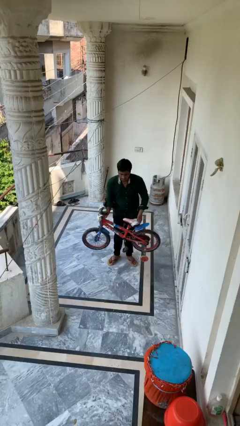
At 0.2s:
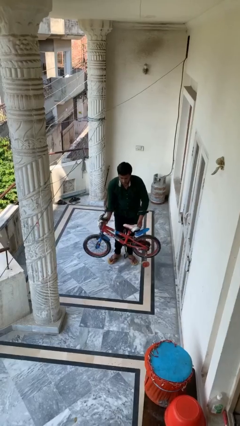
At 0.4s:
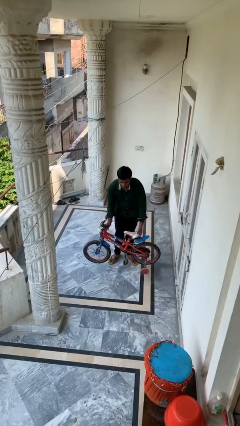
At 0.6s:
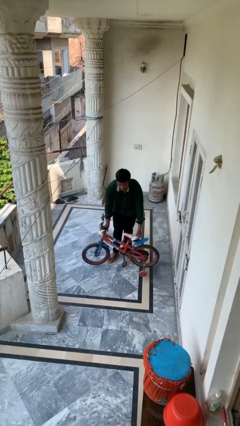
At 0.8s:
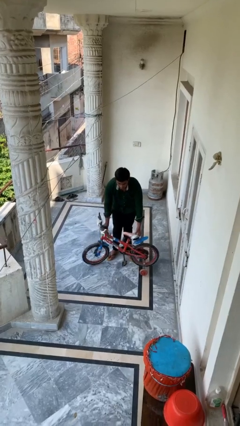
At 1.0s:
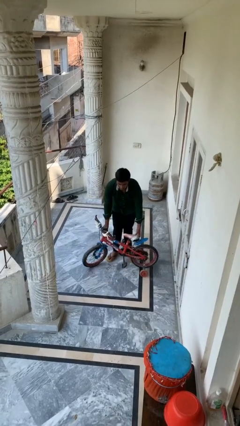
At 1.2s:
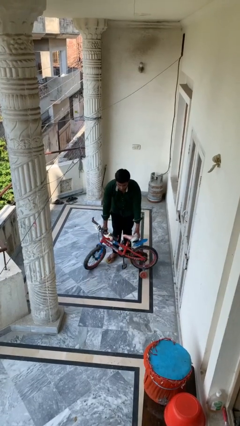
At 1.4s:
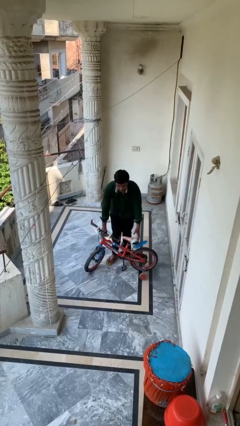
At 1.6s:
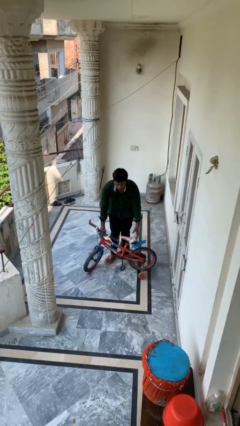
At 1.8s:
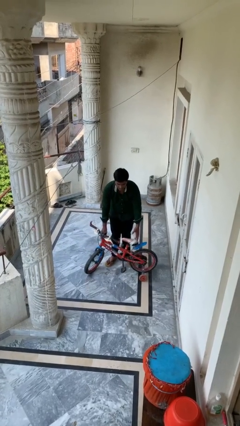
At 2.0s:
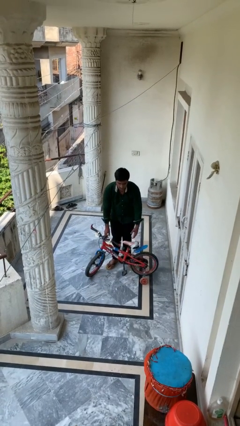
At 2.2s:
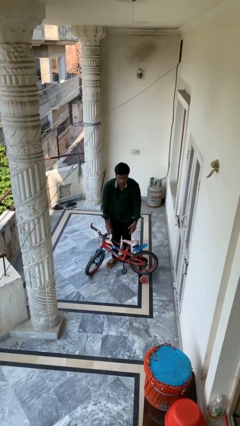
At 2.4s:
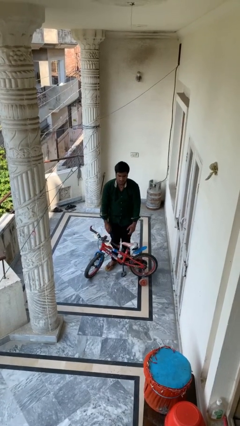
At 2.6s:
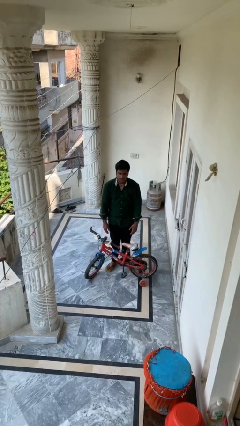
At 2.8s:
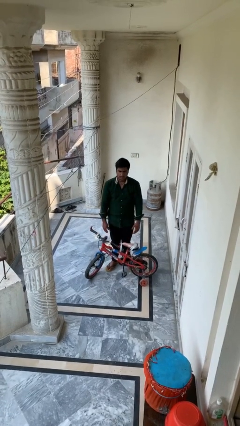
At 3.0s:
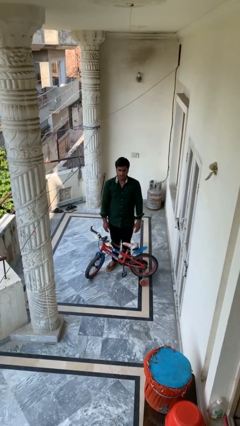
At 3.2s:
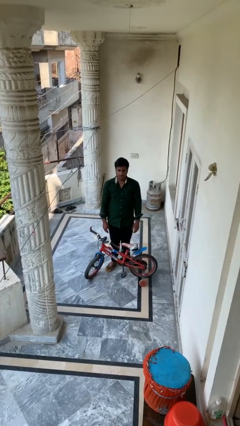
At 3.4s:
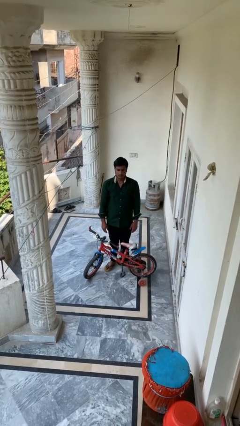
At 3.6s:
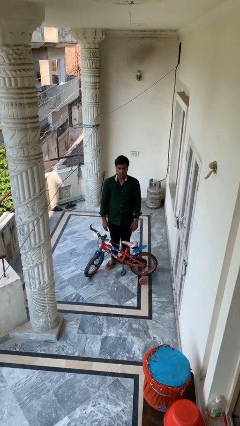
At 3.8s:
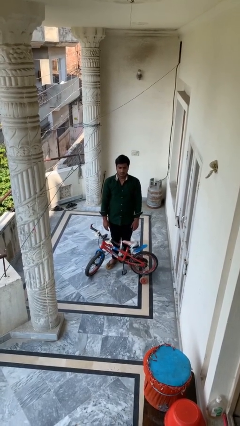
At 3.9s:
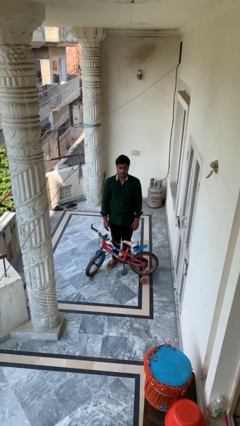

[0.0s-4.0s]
person puts down object on floor

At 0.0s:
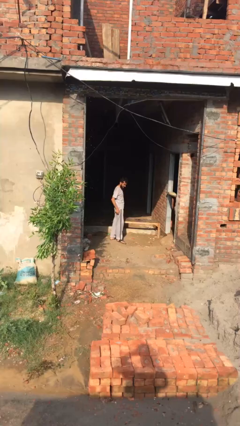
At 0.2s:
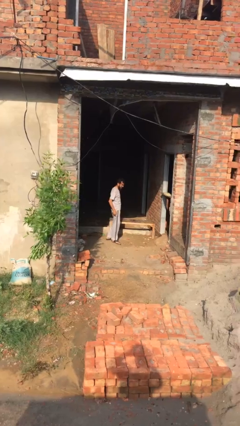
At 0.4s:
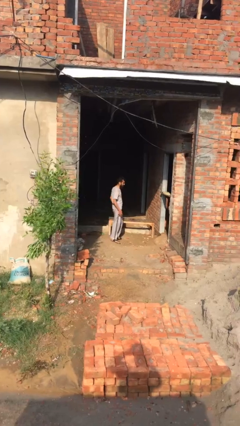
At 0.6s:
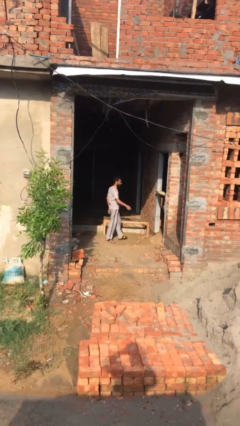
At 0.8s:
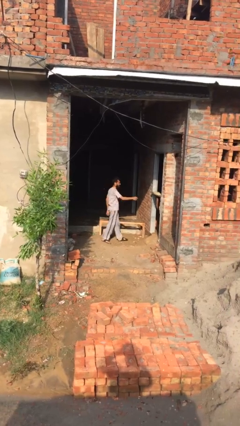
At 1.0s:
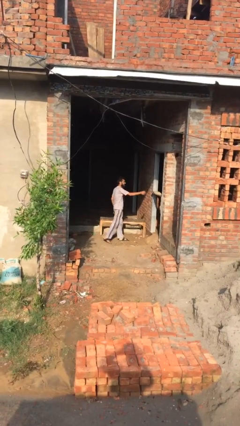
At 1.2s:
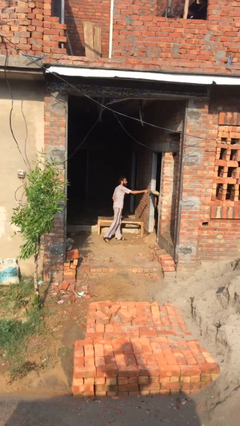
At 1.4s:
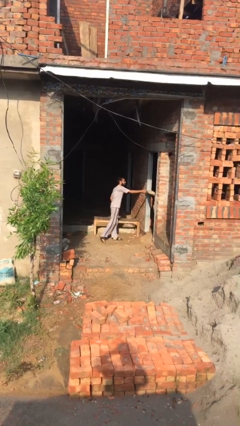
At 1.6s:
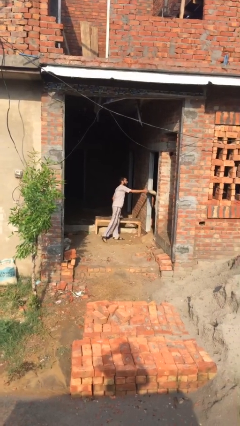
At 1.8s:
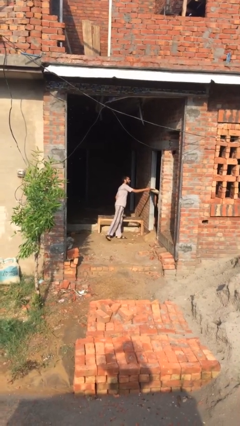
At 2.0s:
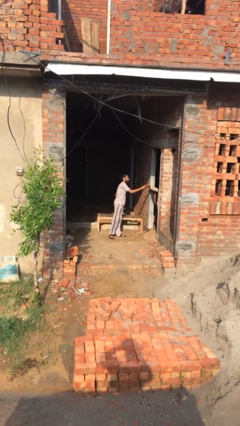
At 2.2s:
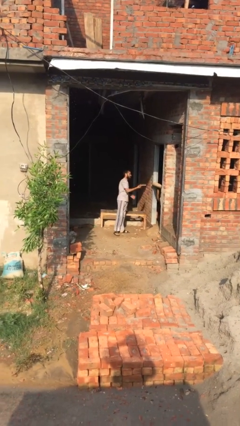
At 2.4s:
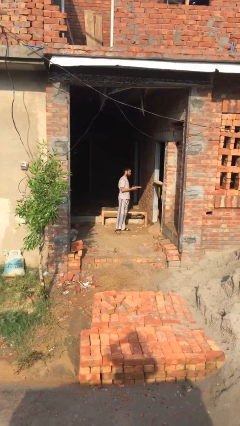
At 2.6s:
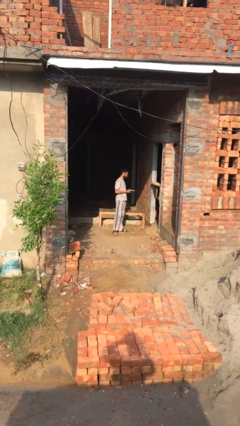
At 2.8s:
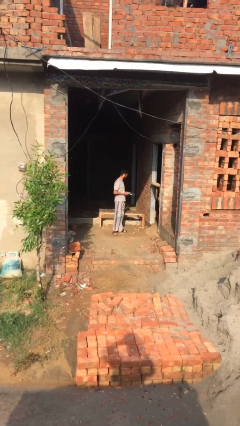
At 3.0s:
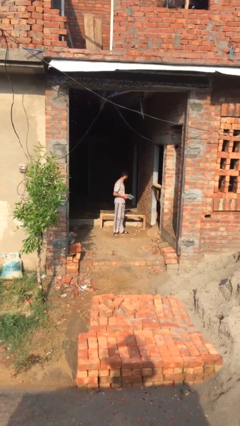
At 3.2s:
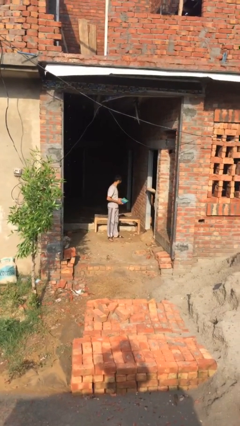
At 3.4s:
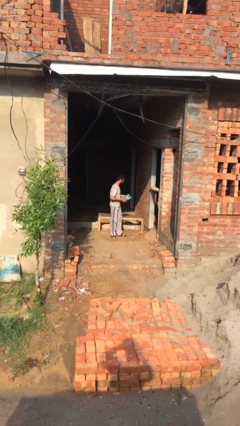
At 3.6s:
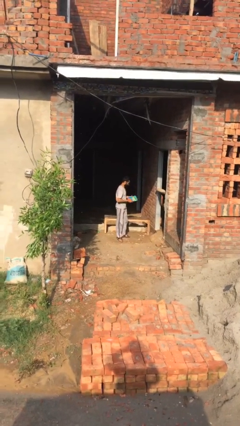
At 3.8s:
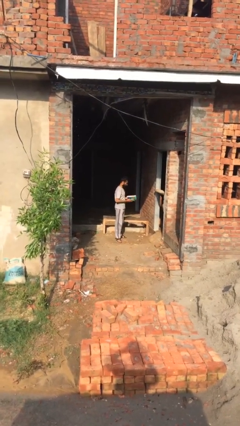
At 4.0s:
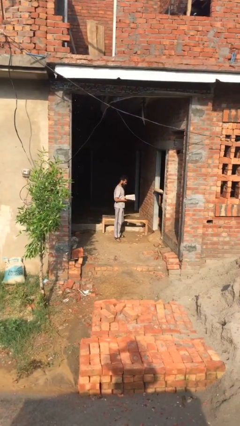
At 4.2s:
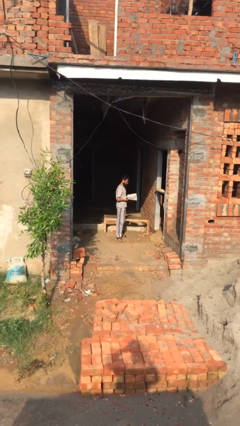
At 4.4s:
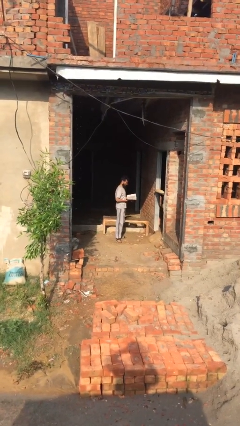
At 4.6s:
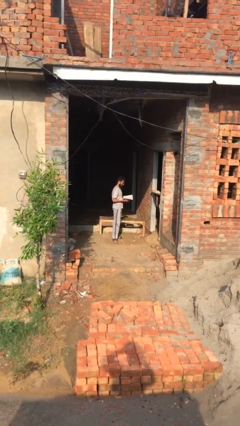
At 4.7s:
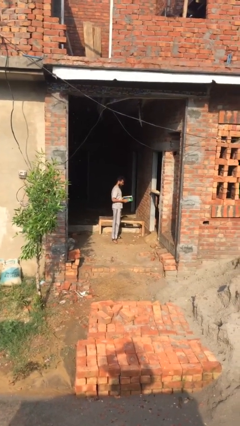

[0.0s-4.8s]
person picks up object from shelf

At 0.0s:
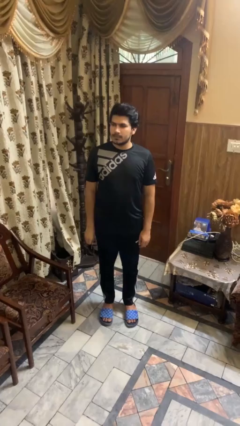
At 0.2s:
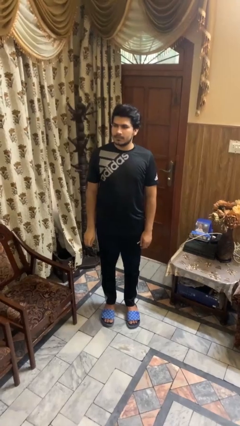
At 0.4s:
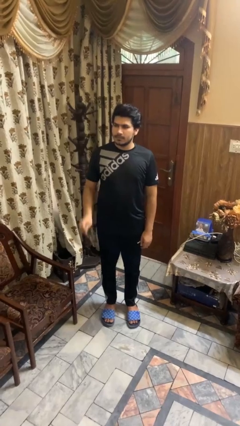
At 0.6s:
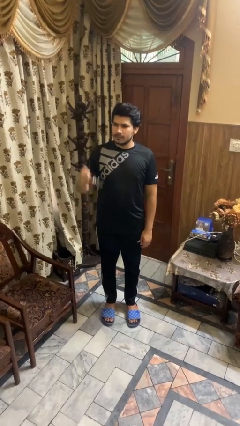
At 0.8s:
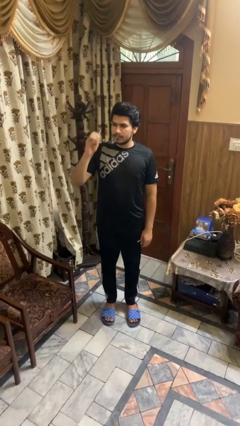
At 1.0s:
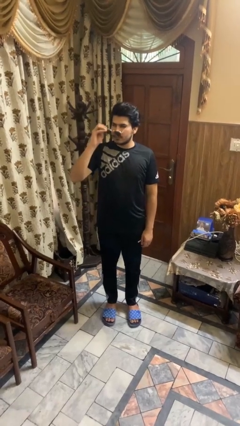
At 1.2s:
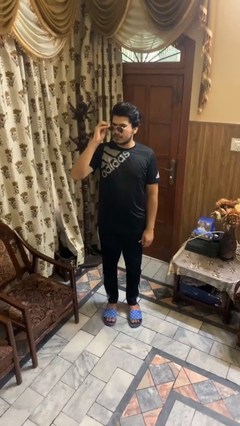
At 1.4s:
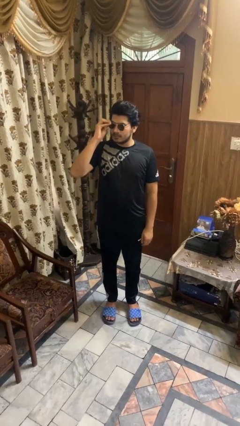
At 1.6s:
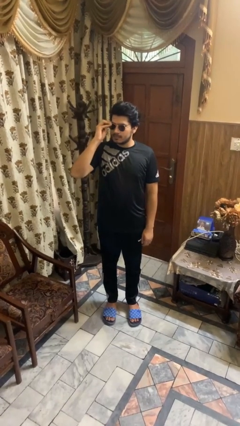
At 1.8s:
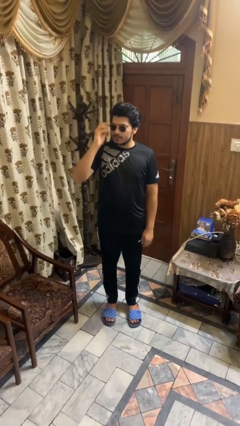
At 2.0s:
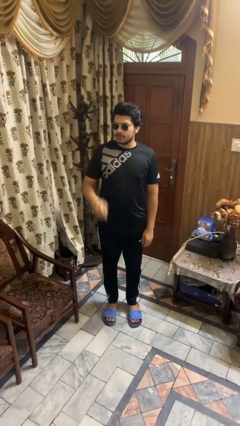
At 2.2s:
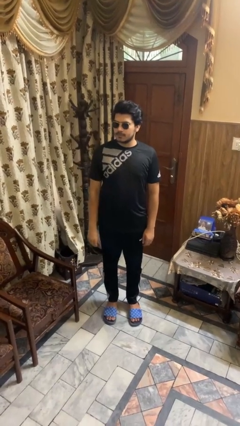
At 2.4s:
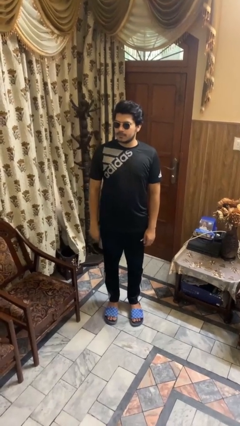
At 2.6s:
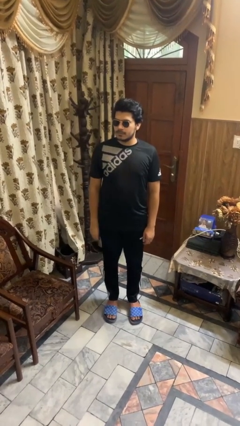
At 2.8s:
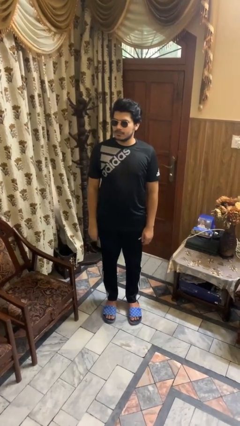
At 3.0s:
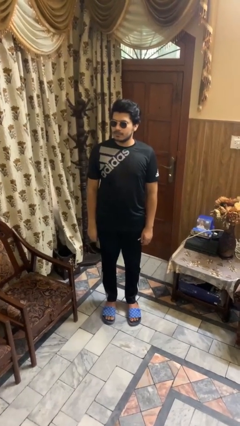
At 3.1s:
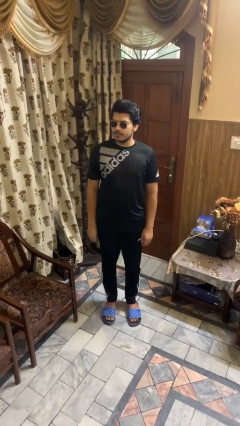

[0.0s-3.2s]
person puts on sunglasses

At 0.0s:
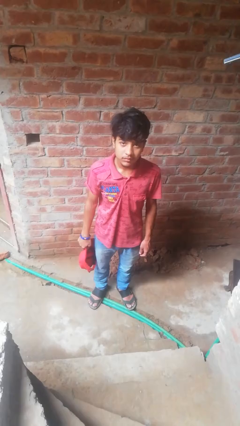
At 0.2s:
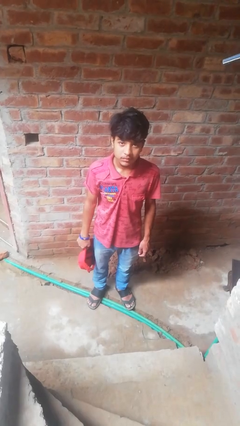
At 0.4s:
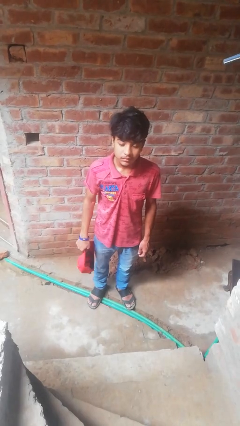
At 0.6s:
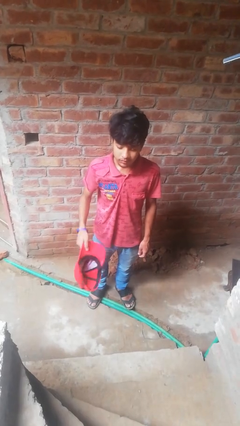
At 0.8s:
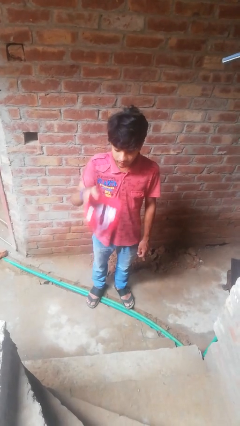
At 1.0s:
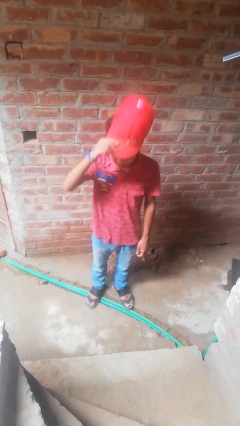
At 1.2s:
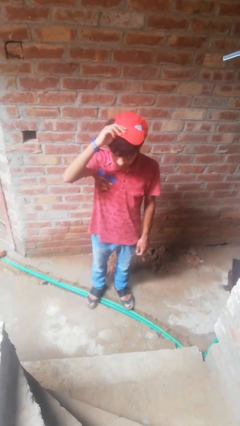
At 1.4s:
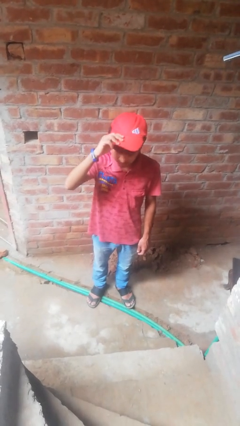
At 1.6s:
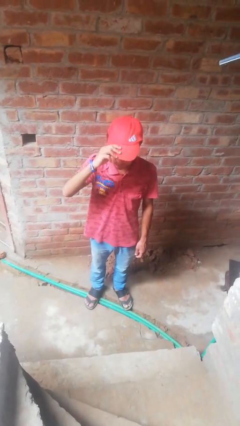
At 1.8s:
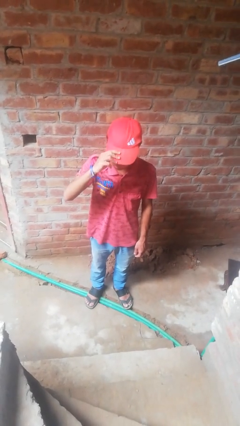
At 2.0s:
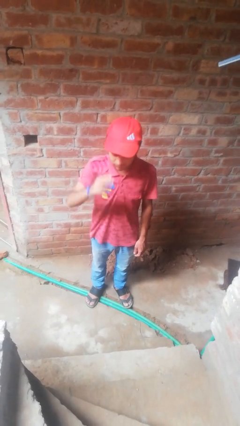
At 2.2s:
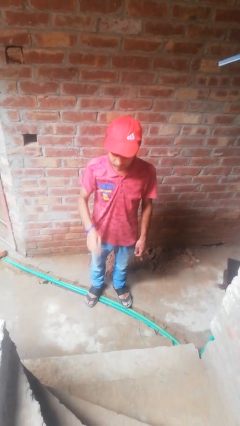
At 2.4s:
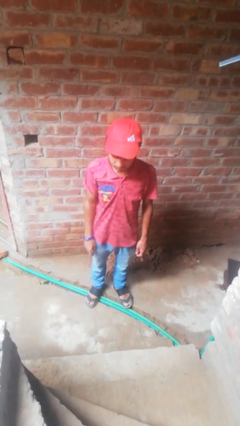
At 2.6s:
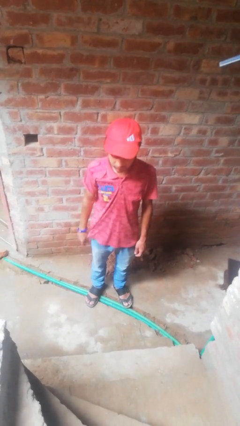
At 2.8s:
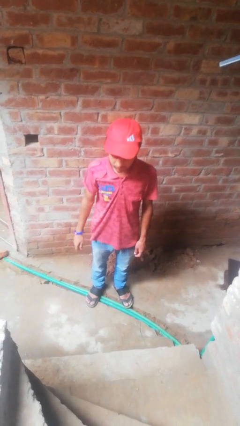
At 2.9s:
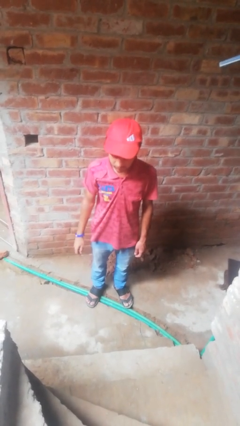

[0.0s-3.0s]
person puts on hat

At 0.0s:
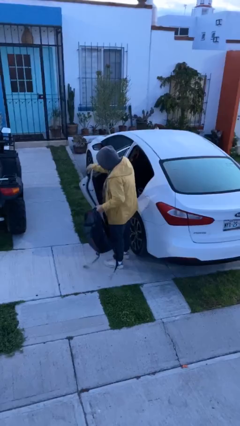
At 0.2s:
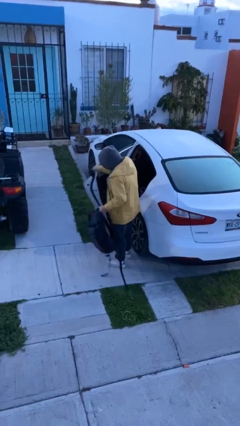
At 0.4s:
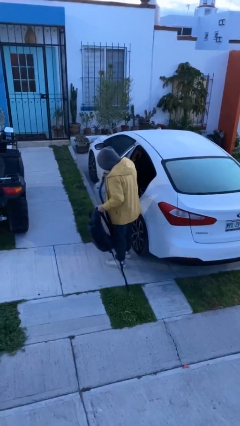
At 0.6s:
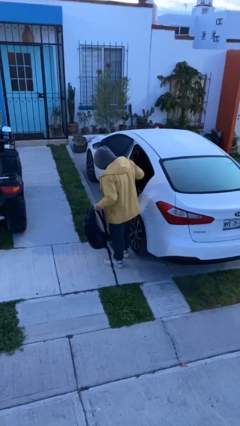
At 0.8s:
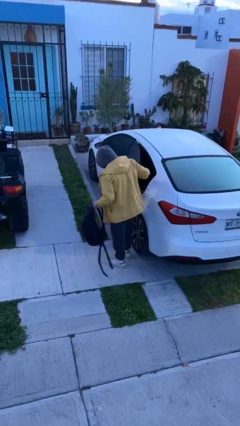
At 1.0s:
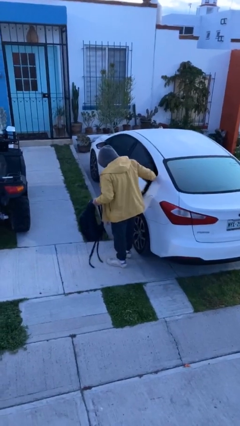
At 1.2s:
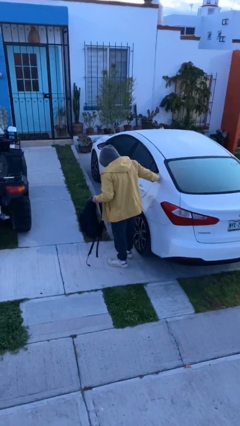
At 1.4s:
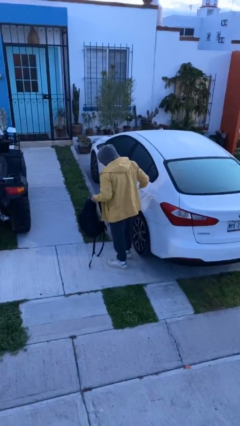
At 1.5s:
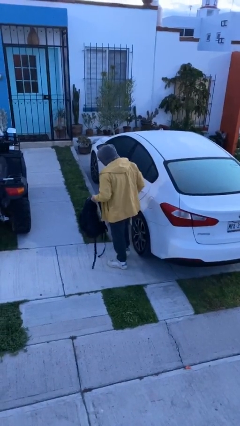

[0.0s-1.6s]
person closes car door

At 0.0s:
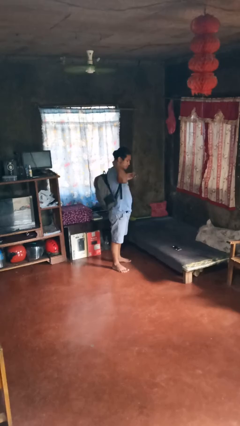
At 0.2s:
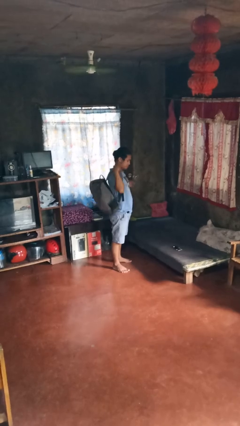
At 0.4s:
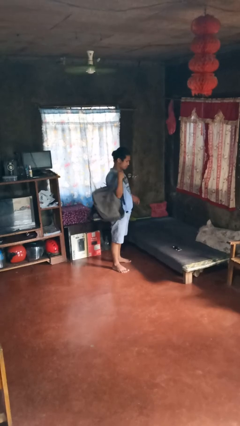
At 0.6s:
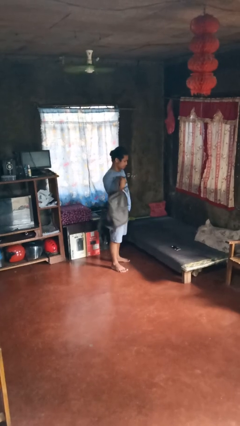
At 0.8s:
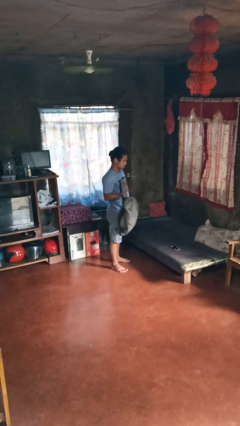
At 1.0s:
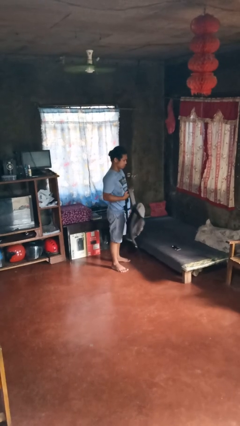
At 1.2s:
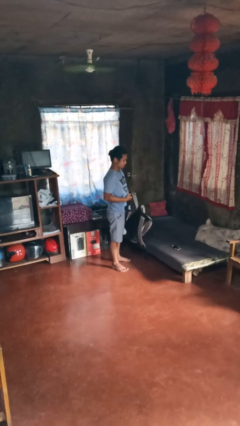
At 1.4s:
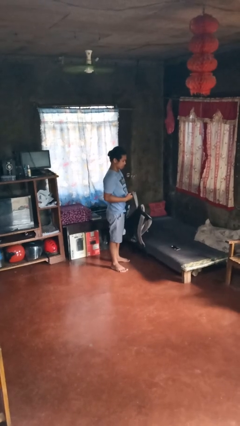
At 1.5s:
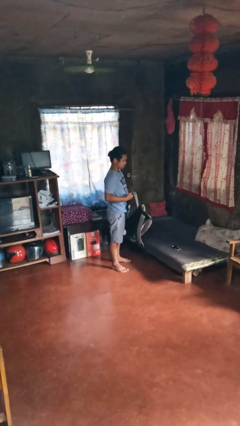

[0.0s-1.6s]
person takes off backpack
